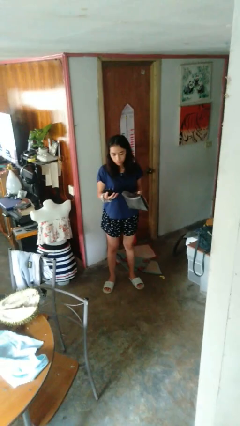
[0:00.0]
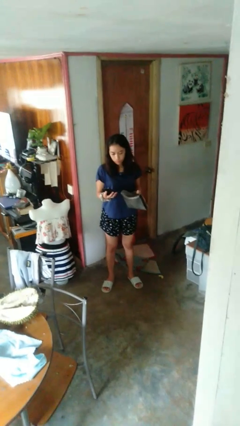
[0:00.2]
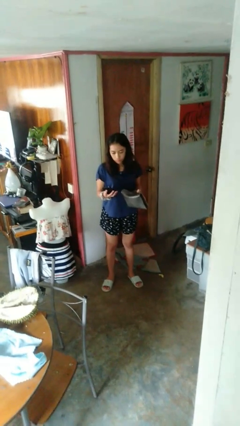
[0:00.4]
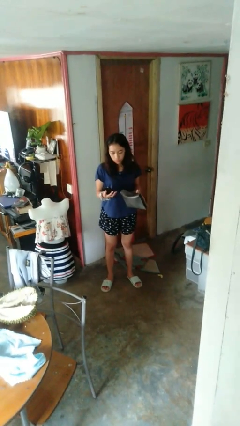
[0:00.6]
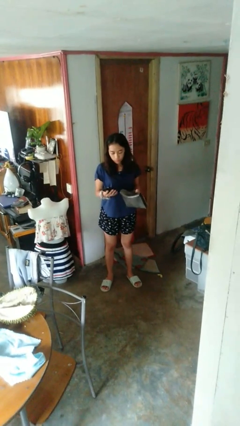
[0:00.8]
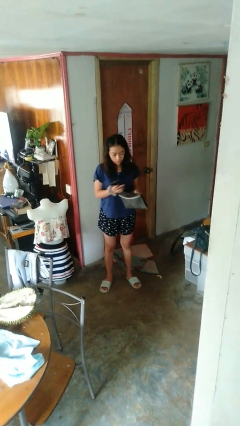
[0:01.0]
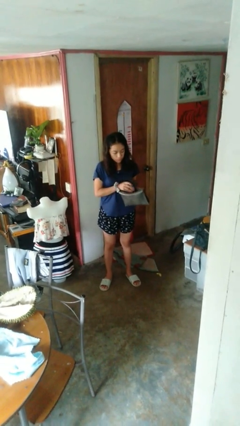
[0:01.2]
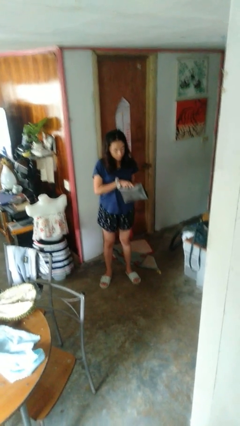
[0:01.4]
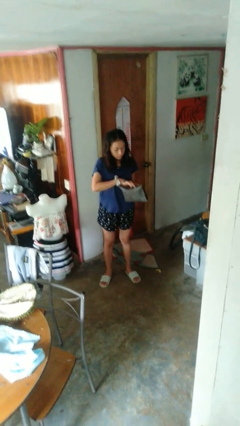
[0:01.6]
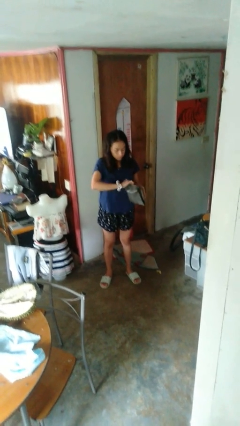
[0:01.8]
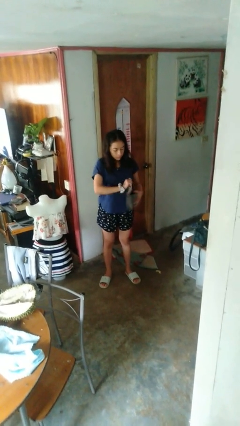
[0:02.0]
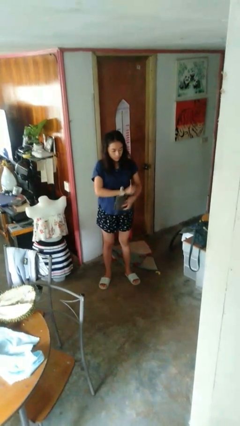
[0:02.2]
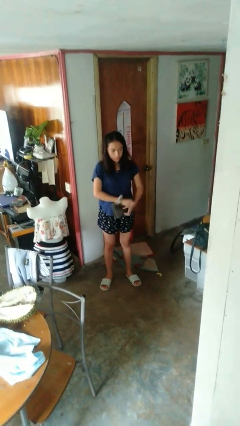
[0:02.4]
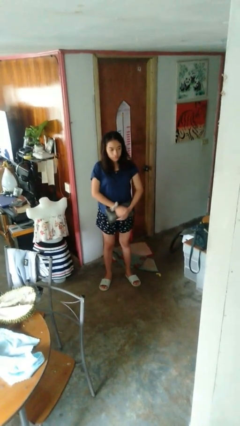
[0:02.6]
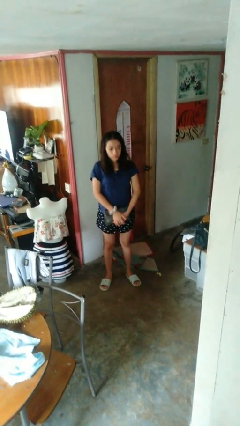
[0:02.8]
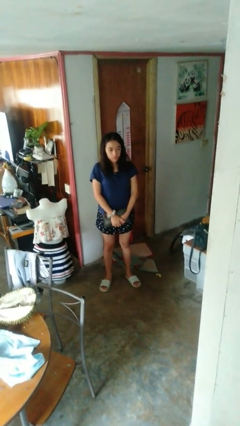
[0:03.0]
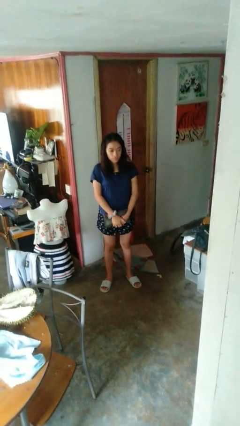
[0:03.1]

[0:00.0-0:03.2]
person puts object into purse

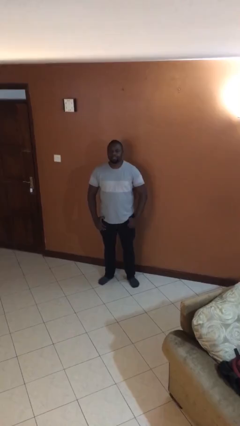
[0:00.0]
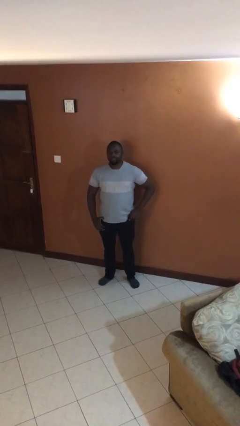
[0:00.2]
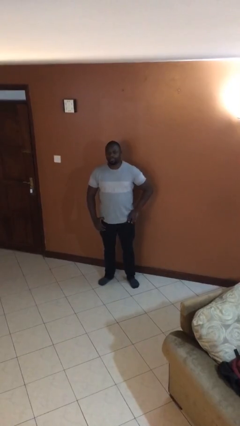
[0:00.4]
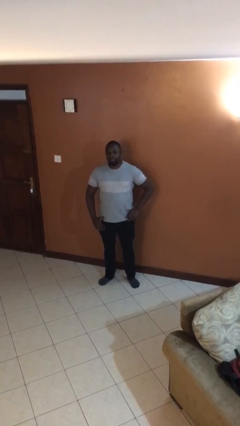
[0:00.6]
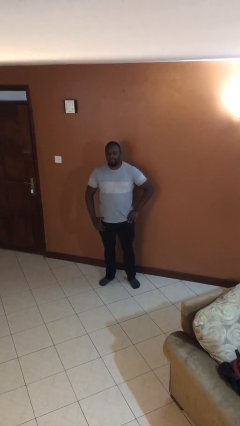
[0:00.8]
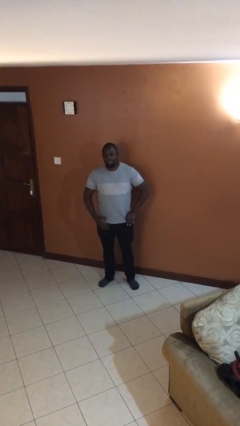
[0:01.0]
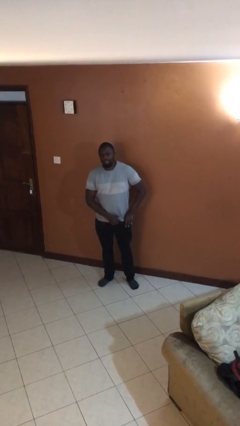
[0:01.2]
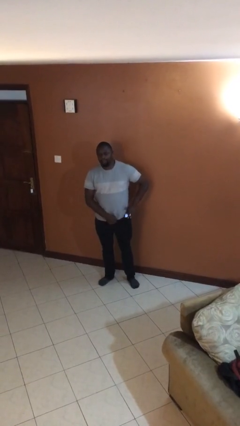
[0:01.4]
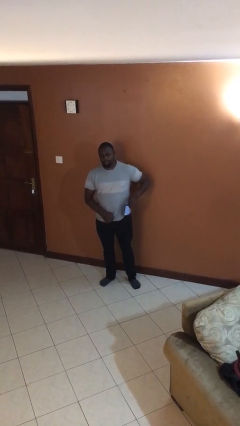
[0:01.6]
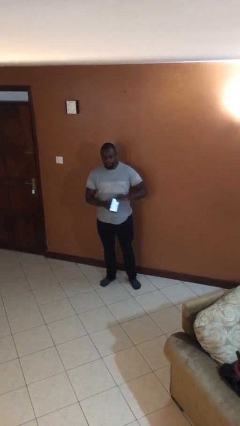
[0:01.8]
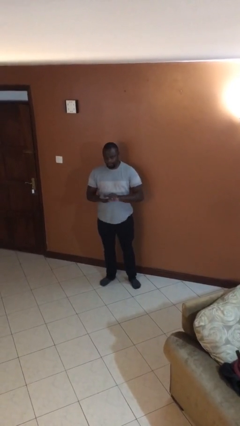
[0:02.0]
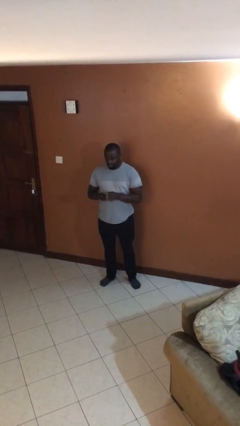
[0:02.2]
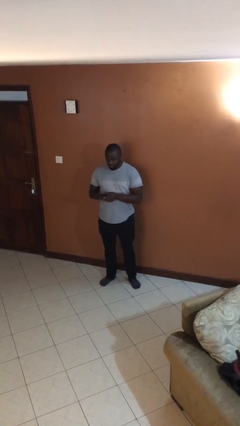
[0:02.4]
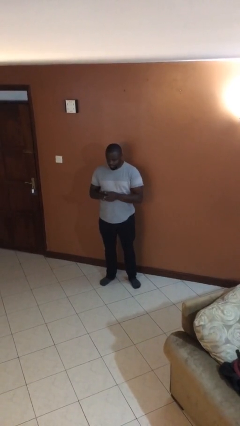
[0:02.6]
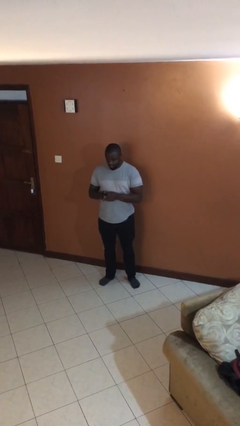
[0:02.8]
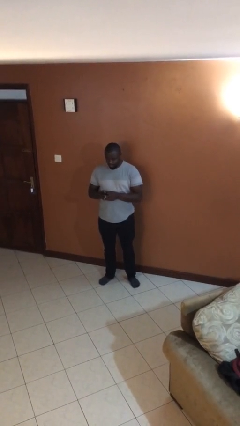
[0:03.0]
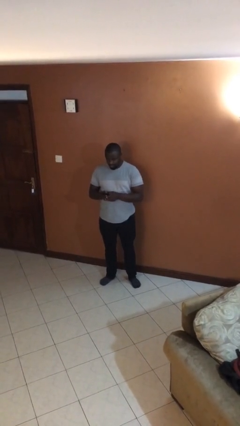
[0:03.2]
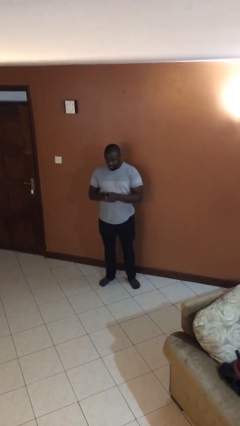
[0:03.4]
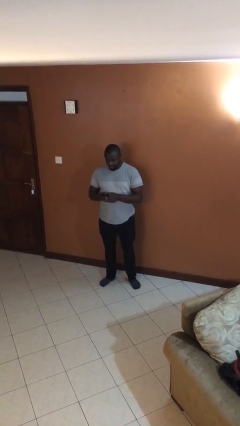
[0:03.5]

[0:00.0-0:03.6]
person takes phone from pocket

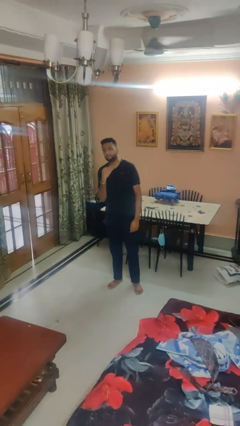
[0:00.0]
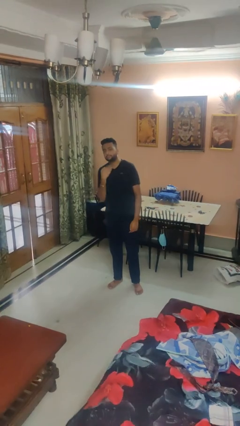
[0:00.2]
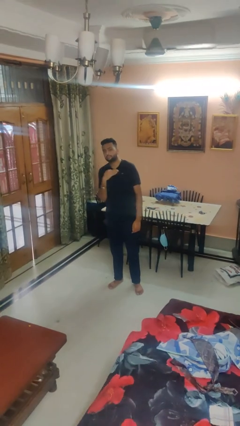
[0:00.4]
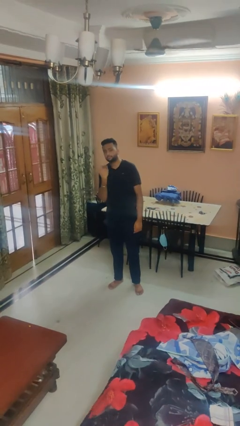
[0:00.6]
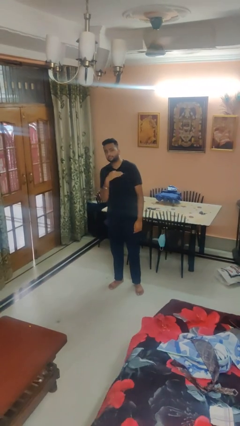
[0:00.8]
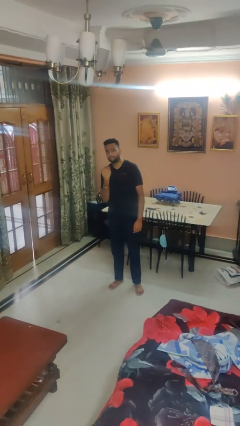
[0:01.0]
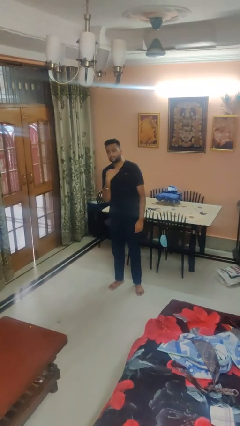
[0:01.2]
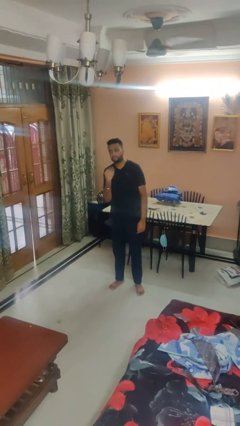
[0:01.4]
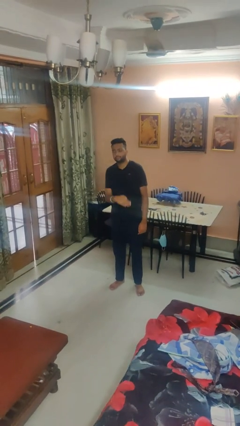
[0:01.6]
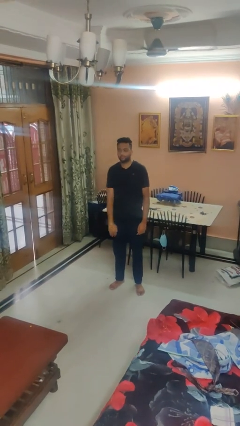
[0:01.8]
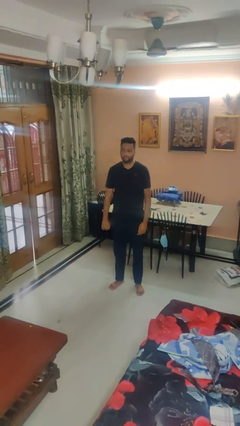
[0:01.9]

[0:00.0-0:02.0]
person gestures cut

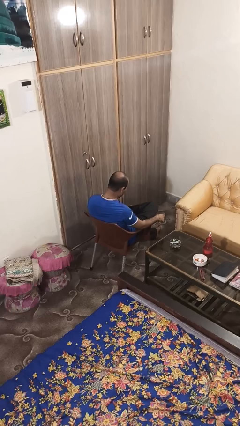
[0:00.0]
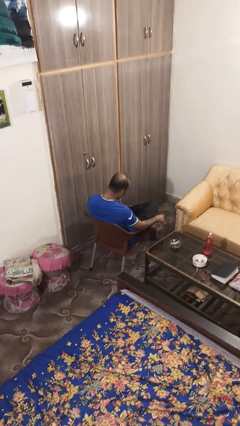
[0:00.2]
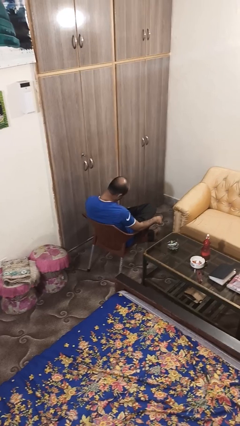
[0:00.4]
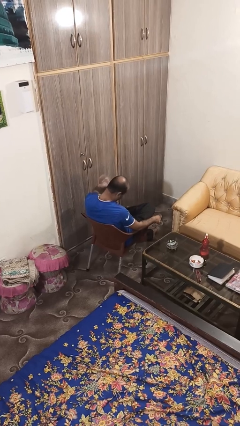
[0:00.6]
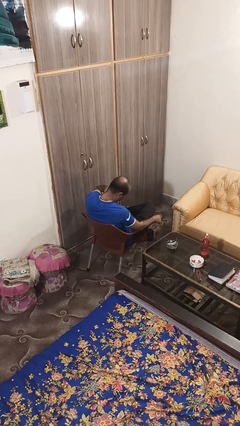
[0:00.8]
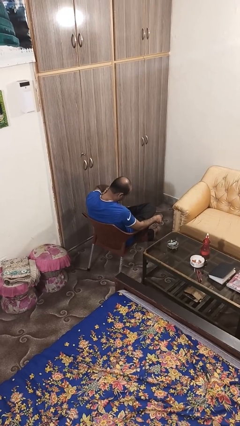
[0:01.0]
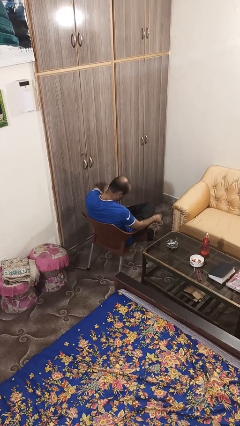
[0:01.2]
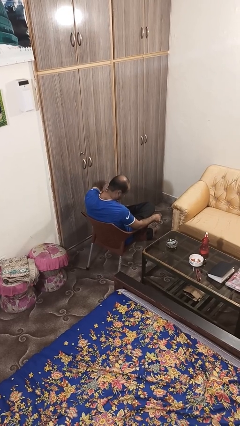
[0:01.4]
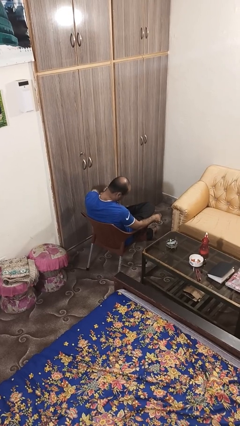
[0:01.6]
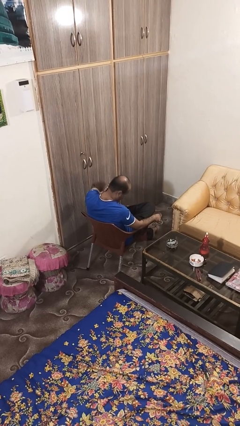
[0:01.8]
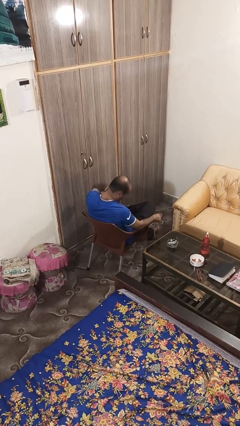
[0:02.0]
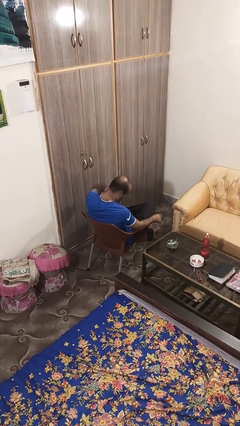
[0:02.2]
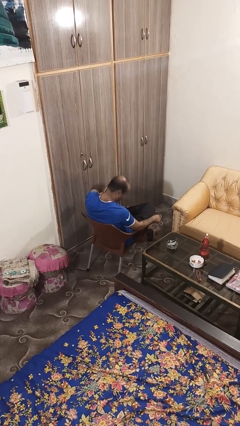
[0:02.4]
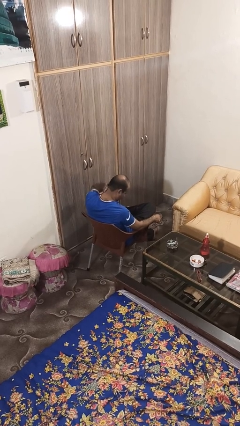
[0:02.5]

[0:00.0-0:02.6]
person swats bug

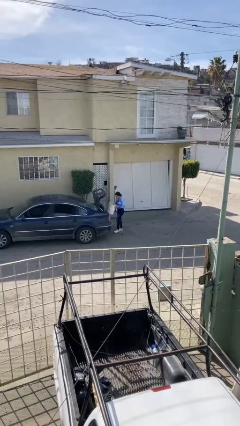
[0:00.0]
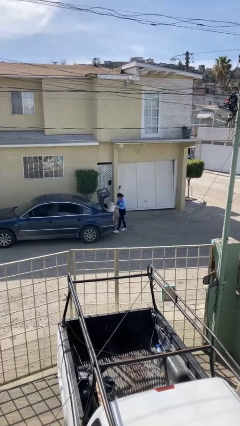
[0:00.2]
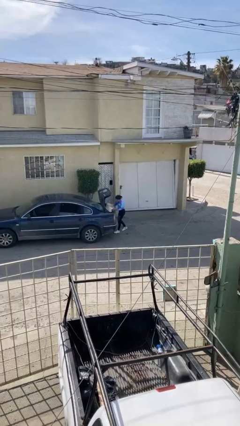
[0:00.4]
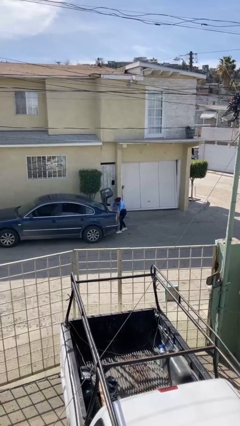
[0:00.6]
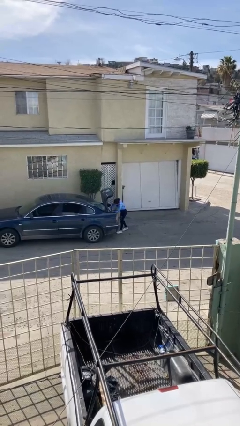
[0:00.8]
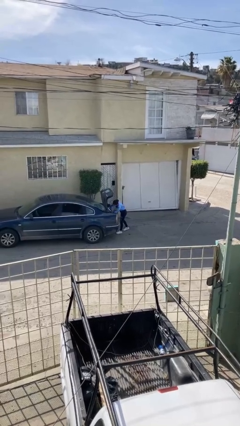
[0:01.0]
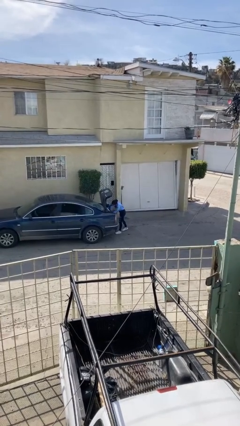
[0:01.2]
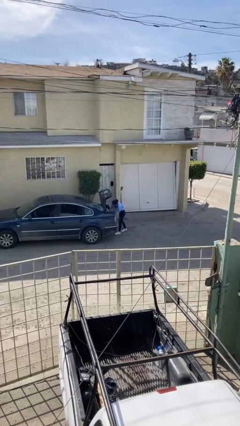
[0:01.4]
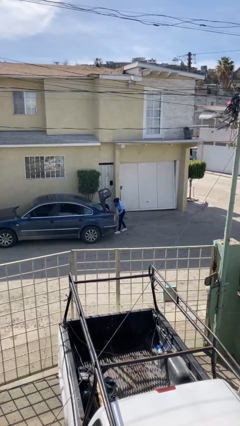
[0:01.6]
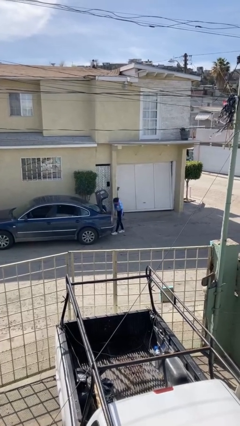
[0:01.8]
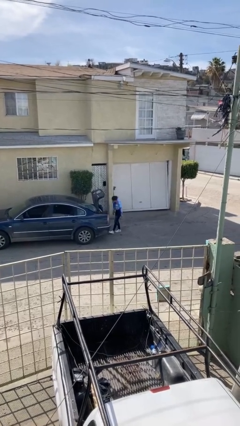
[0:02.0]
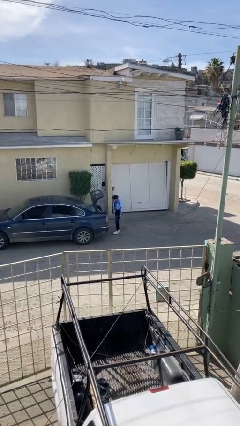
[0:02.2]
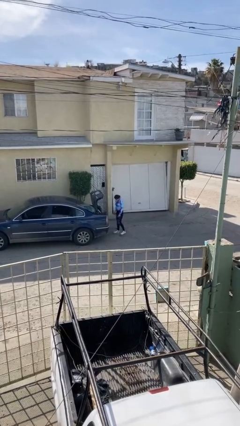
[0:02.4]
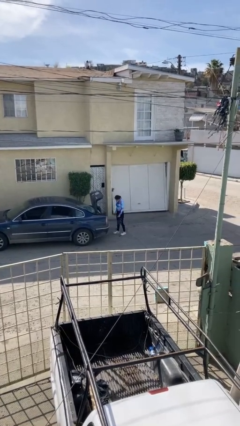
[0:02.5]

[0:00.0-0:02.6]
person loads car

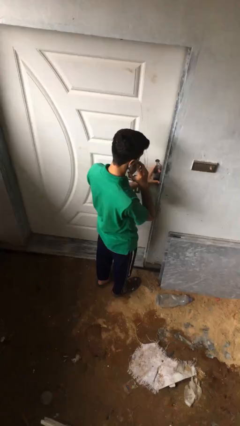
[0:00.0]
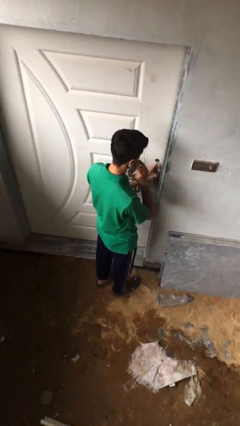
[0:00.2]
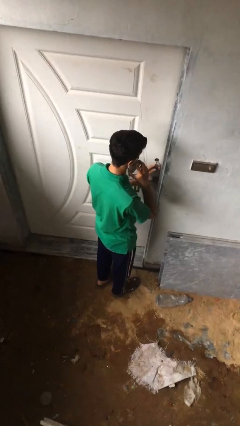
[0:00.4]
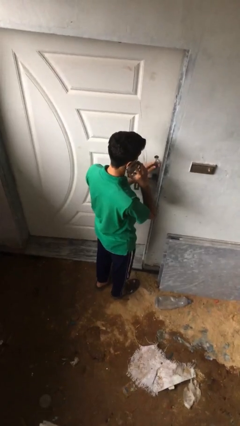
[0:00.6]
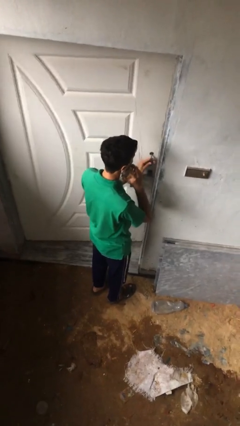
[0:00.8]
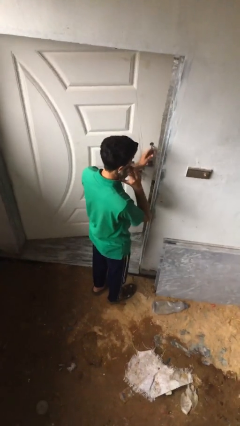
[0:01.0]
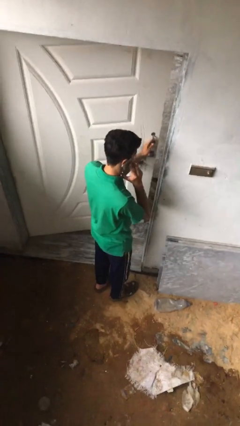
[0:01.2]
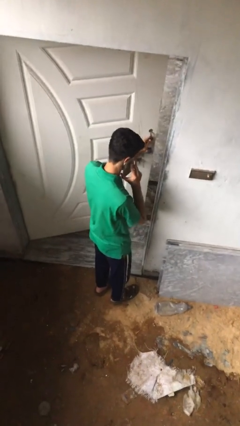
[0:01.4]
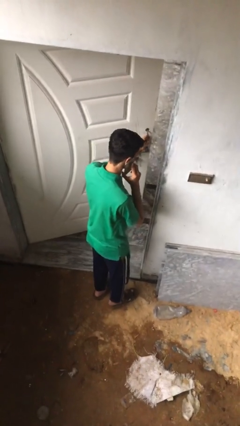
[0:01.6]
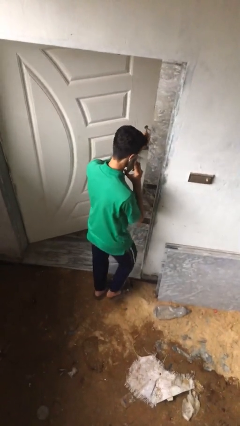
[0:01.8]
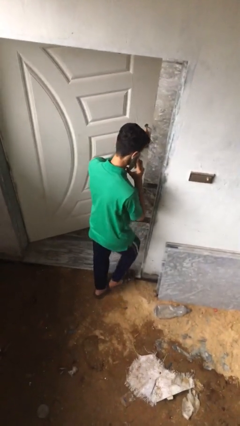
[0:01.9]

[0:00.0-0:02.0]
person opens facility door

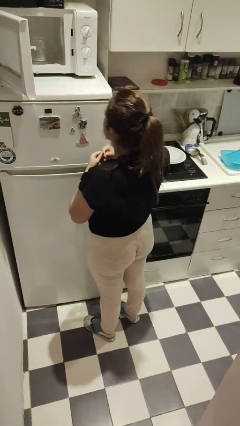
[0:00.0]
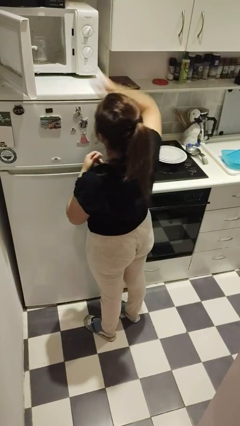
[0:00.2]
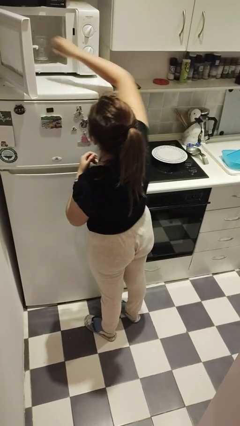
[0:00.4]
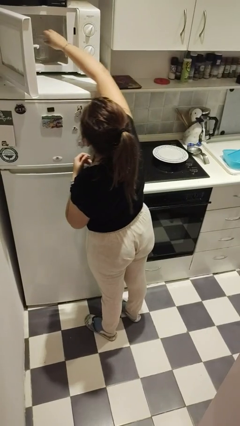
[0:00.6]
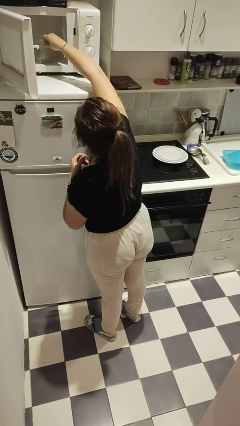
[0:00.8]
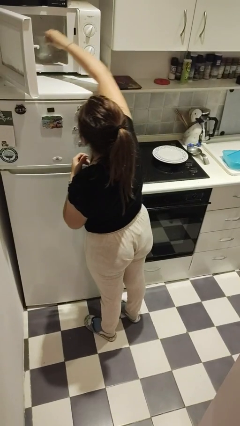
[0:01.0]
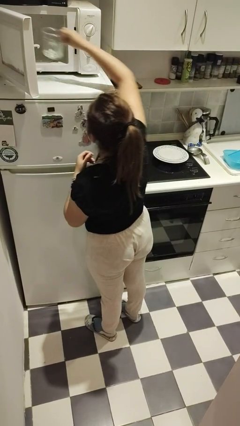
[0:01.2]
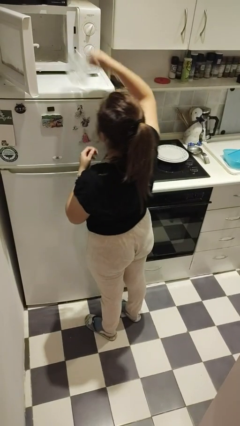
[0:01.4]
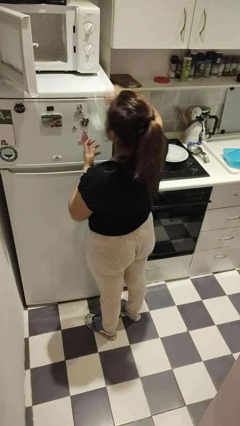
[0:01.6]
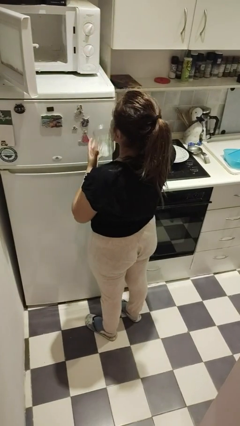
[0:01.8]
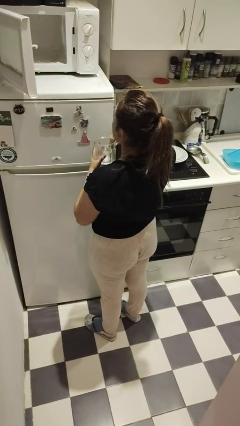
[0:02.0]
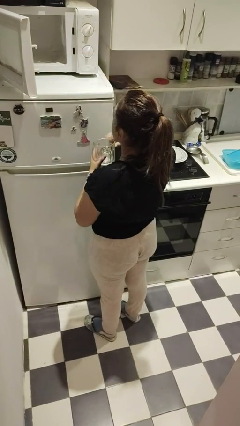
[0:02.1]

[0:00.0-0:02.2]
person takes object from microwave
